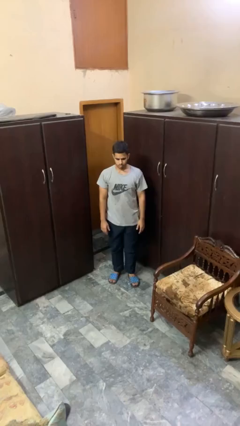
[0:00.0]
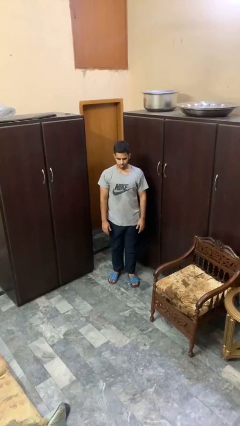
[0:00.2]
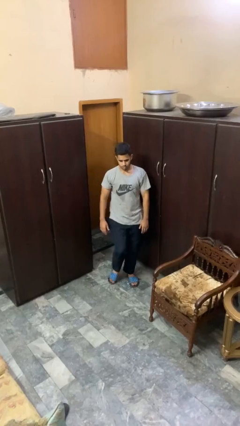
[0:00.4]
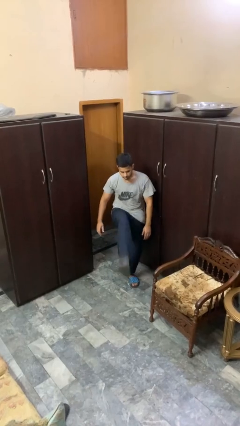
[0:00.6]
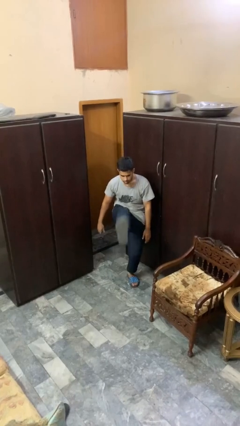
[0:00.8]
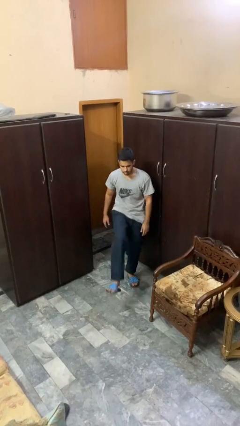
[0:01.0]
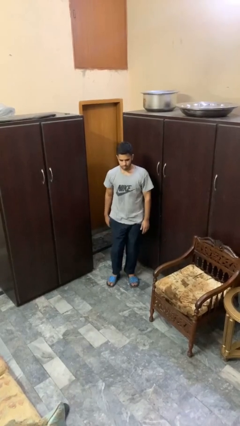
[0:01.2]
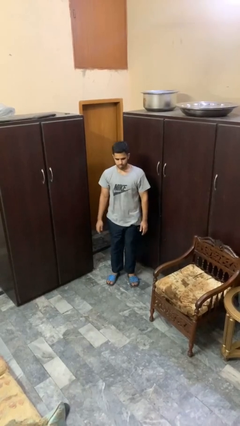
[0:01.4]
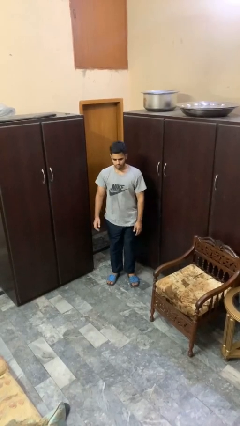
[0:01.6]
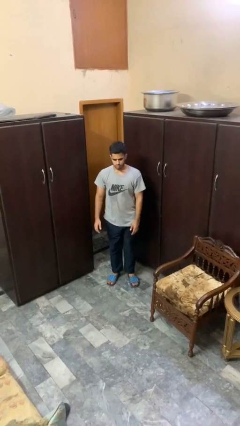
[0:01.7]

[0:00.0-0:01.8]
person karate kicks

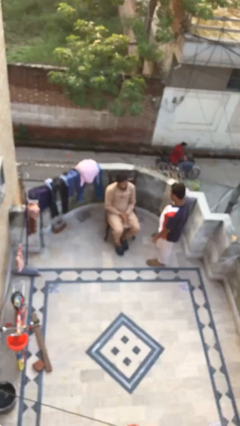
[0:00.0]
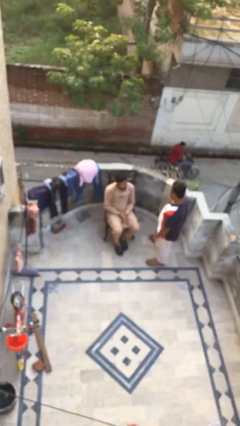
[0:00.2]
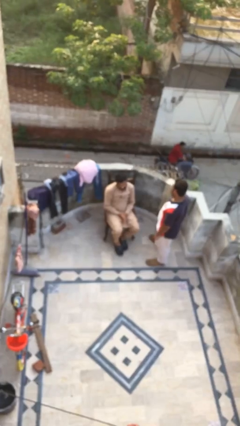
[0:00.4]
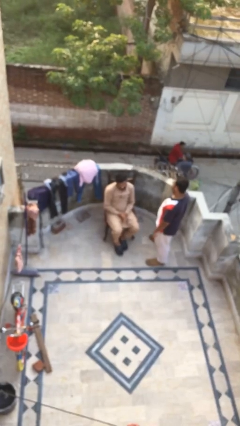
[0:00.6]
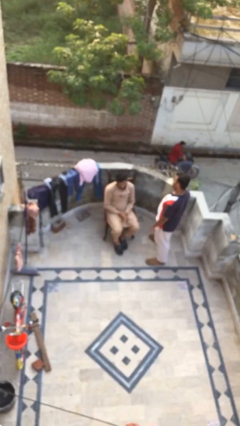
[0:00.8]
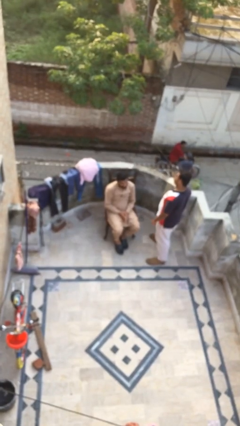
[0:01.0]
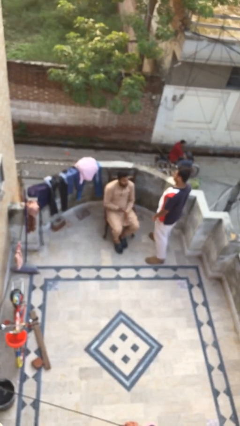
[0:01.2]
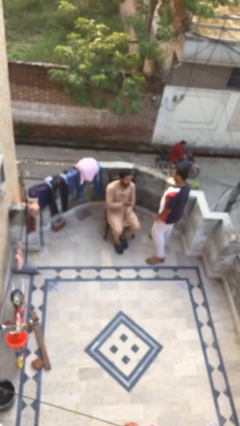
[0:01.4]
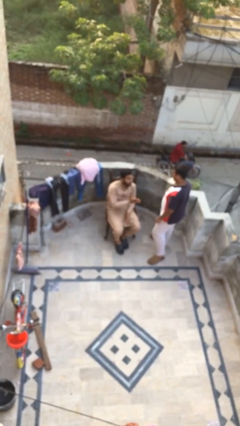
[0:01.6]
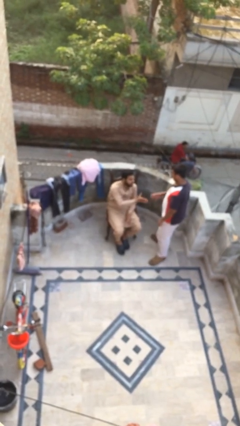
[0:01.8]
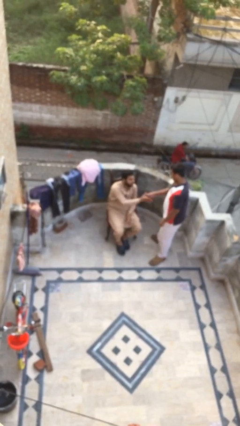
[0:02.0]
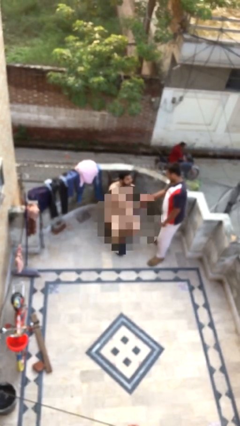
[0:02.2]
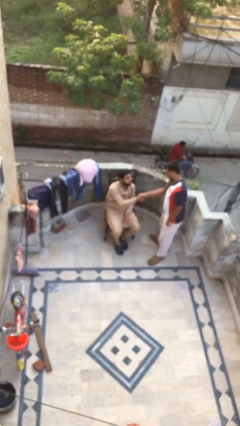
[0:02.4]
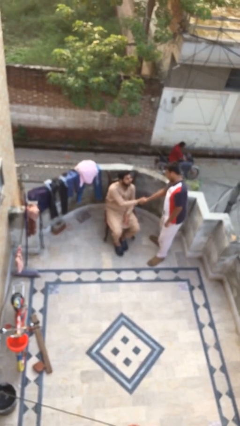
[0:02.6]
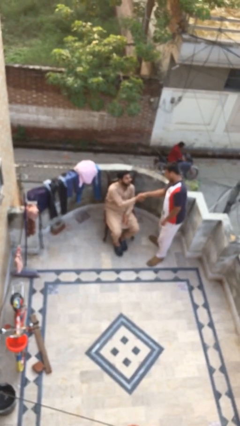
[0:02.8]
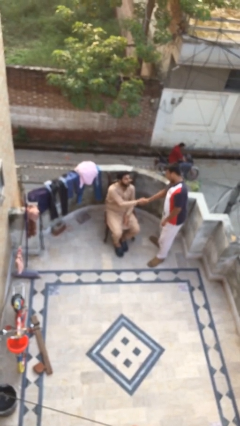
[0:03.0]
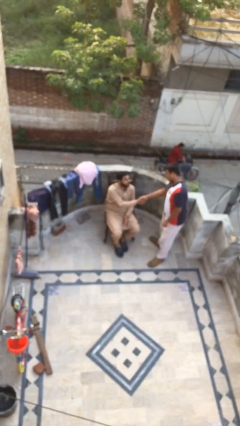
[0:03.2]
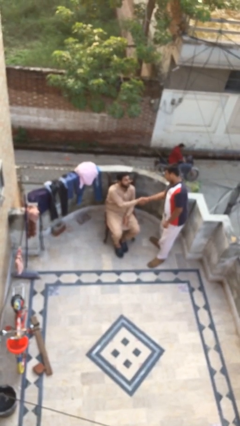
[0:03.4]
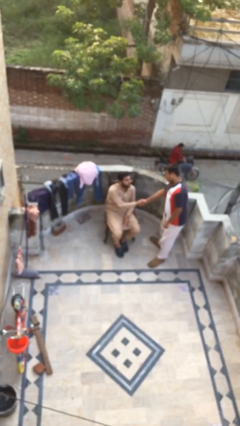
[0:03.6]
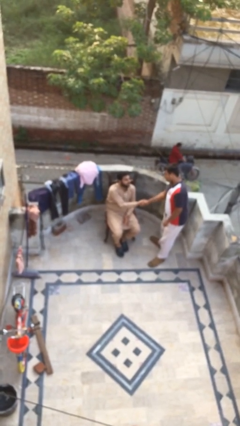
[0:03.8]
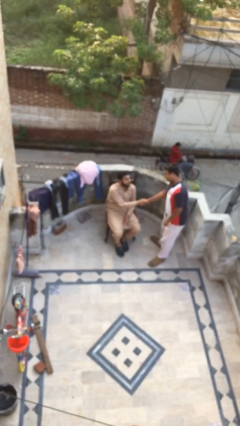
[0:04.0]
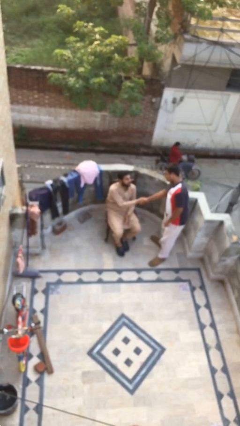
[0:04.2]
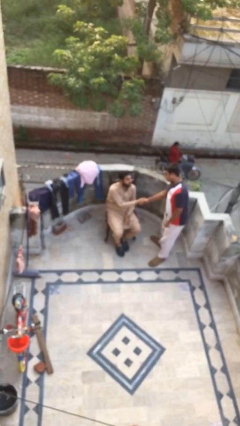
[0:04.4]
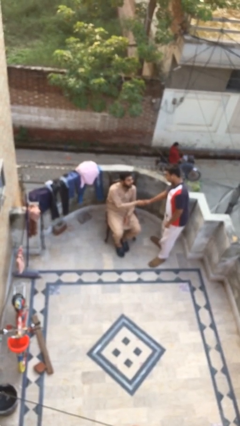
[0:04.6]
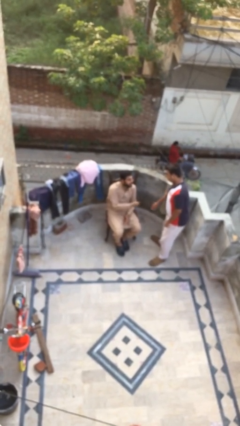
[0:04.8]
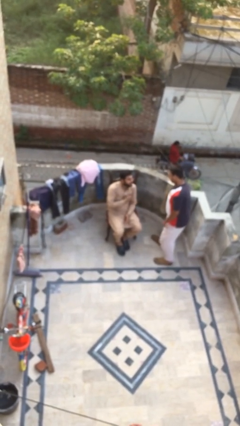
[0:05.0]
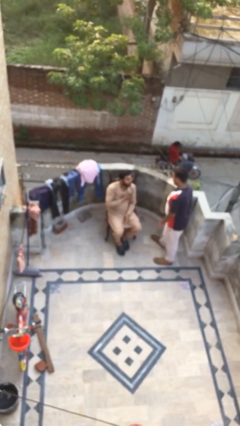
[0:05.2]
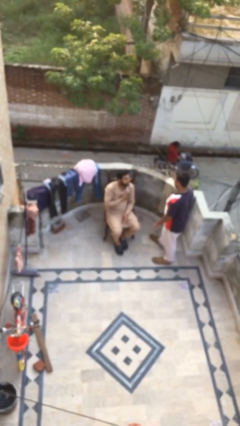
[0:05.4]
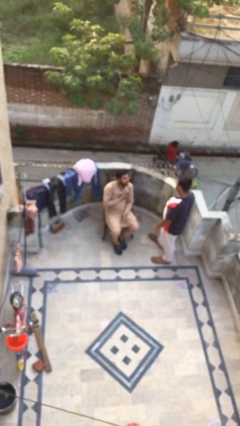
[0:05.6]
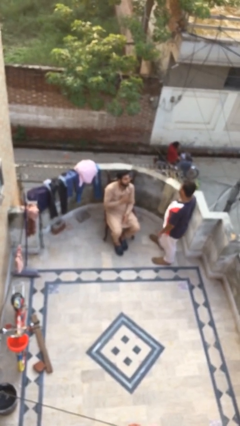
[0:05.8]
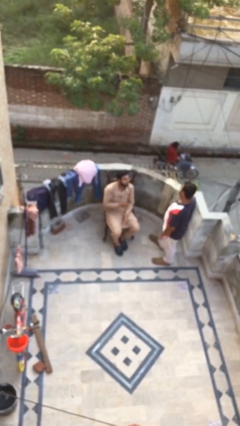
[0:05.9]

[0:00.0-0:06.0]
person shakes hand

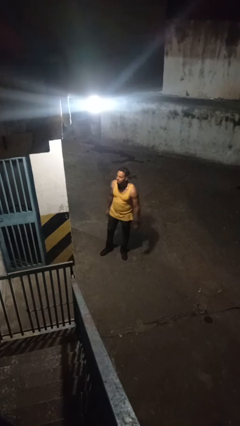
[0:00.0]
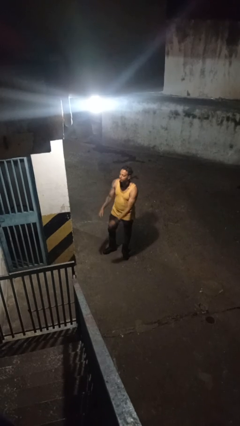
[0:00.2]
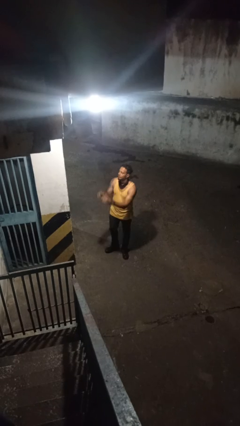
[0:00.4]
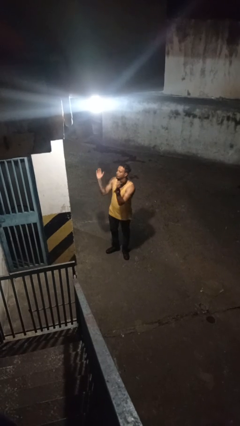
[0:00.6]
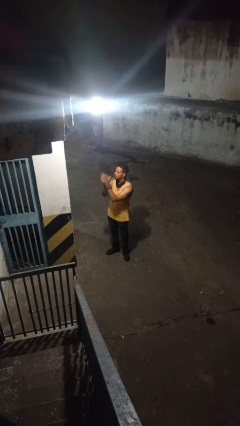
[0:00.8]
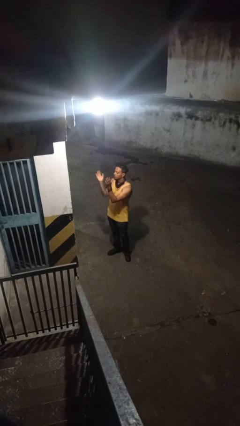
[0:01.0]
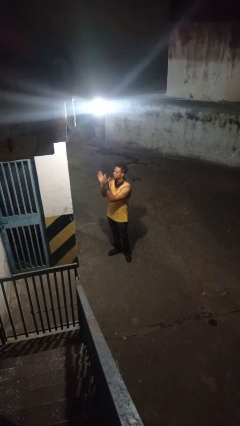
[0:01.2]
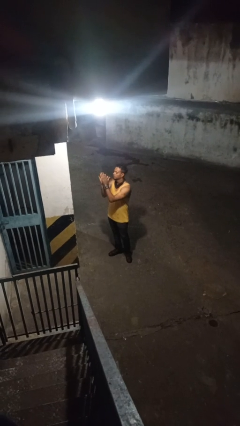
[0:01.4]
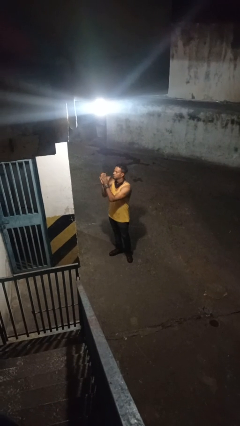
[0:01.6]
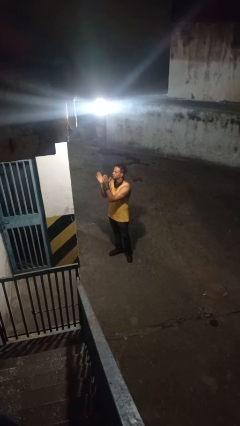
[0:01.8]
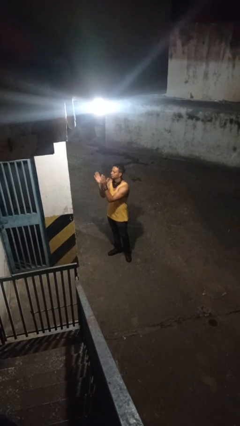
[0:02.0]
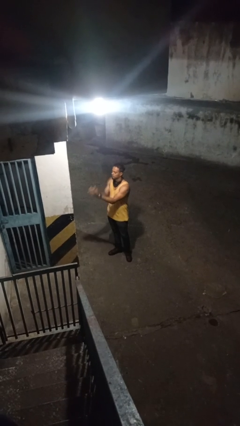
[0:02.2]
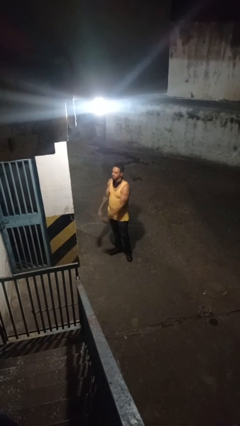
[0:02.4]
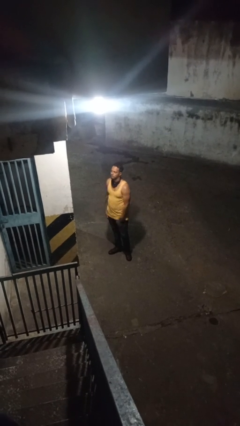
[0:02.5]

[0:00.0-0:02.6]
person claps hands

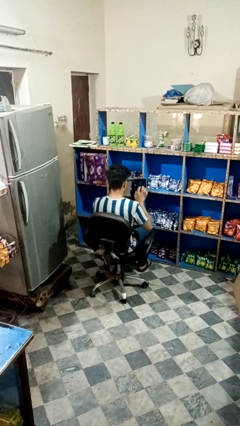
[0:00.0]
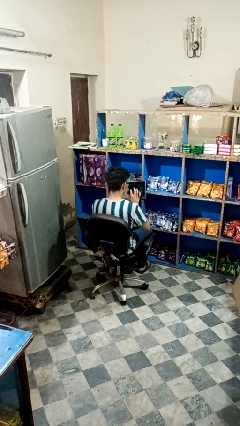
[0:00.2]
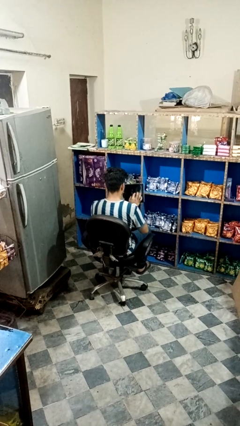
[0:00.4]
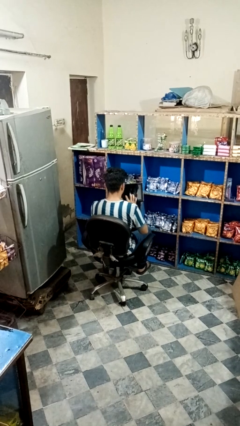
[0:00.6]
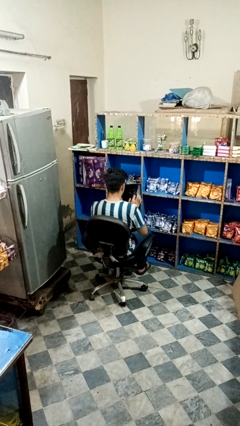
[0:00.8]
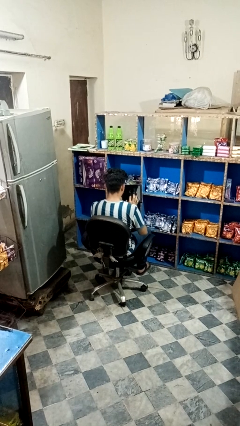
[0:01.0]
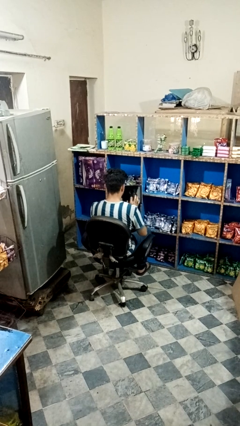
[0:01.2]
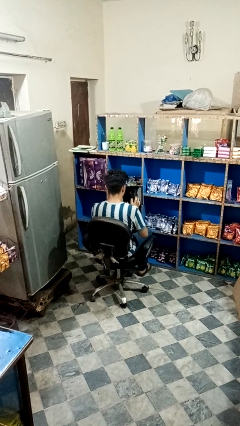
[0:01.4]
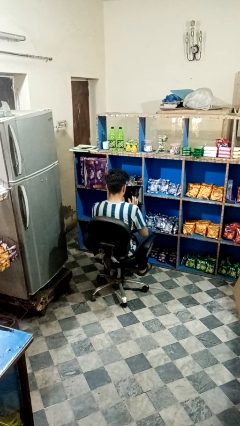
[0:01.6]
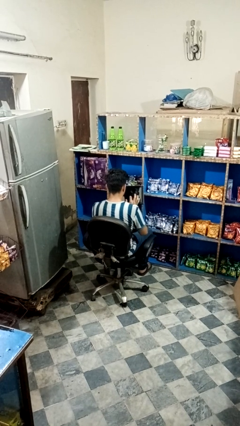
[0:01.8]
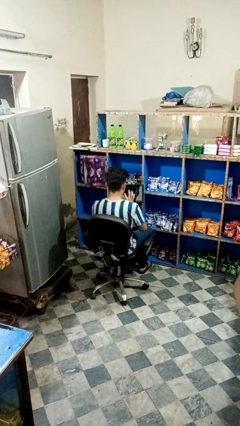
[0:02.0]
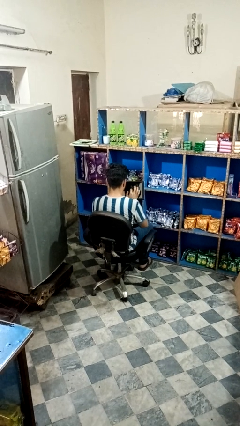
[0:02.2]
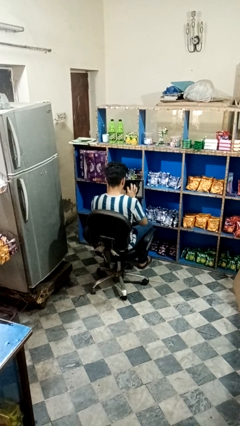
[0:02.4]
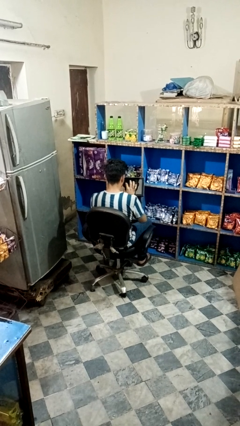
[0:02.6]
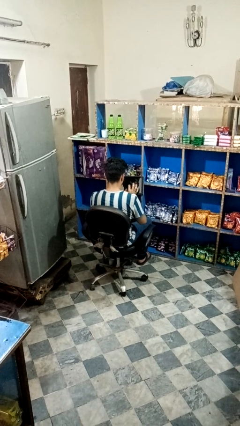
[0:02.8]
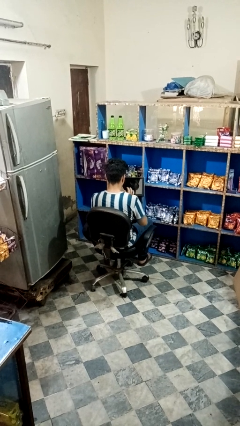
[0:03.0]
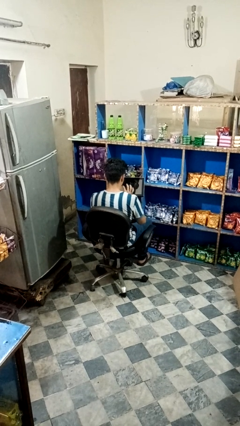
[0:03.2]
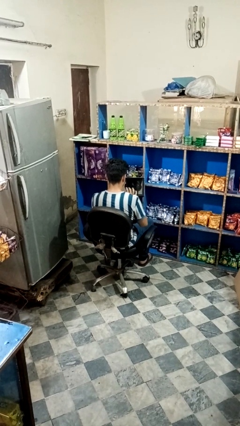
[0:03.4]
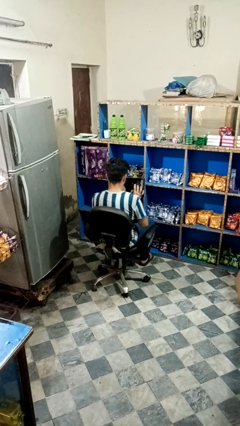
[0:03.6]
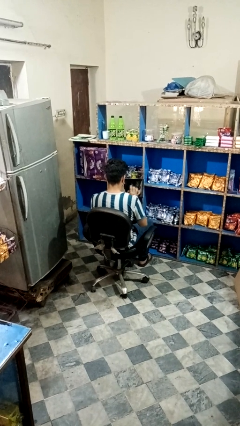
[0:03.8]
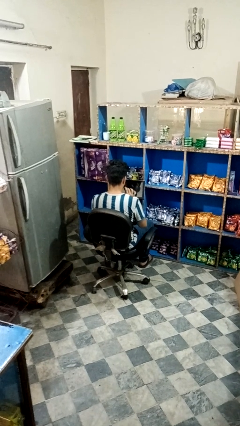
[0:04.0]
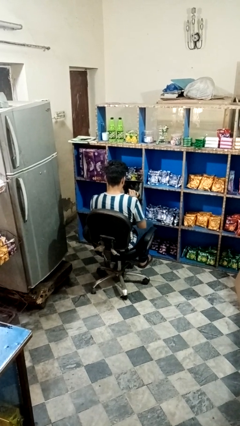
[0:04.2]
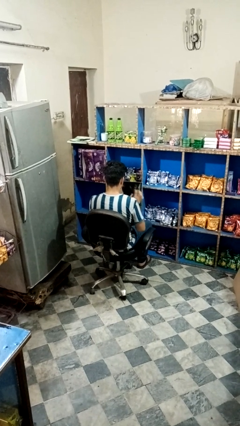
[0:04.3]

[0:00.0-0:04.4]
person interacts with tablet

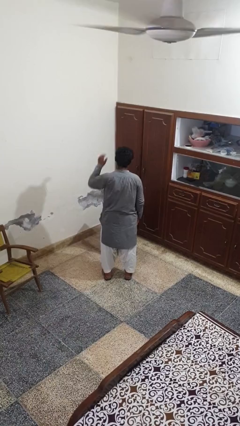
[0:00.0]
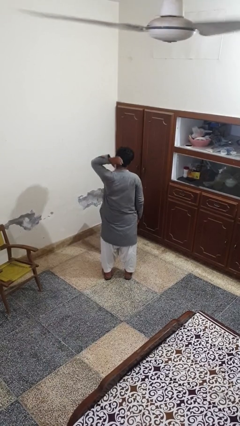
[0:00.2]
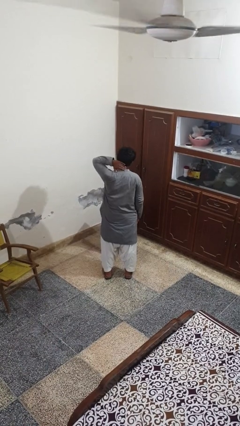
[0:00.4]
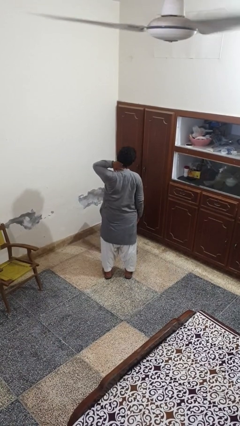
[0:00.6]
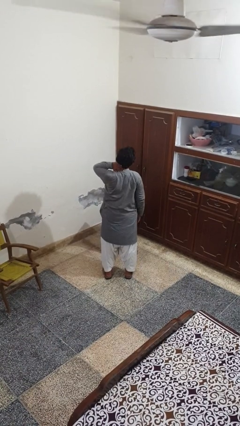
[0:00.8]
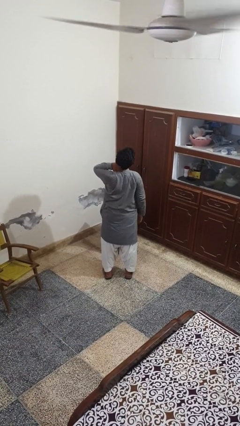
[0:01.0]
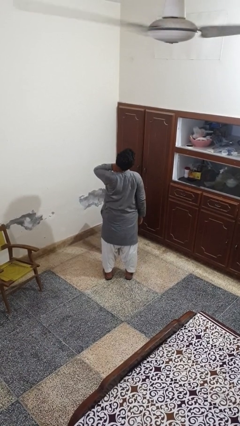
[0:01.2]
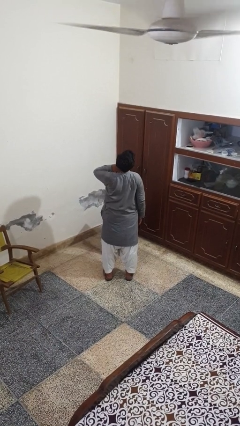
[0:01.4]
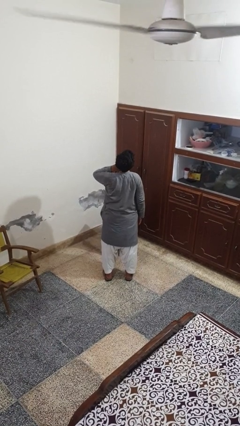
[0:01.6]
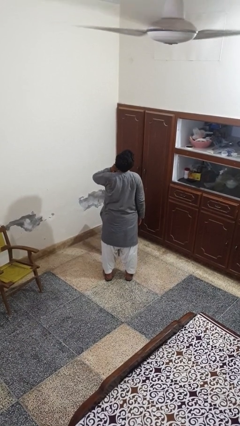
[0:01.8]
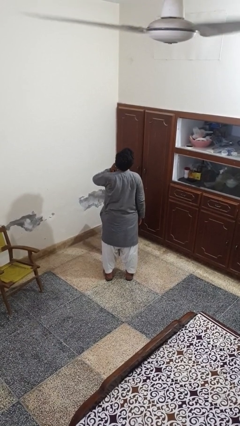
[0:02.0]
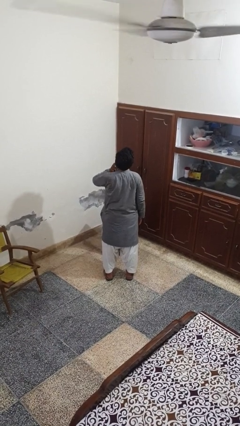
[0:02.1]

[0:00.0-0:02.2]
person rubs neck

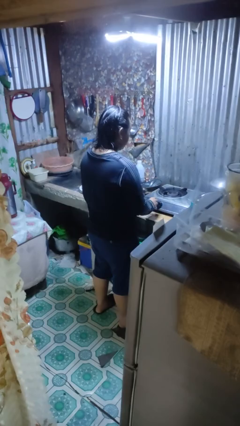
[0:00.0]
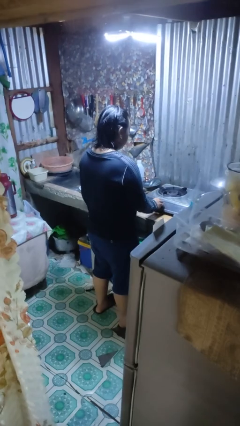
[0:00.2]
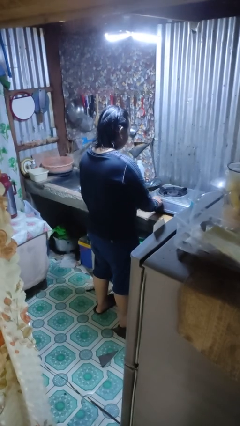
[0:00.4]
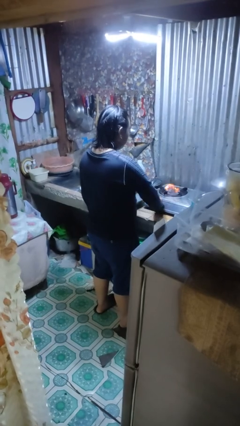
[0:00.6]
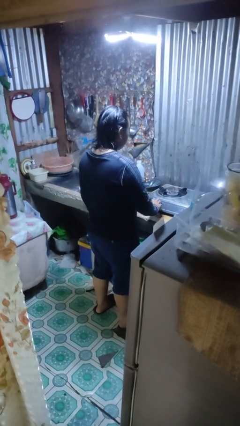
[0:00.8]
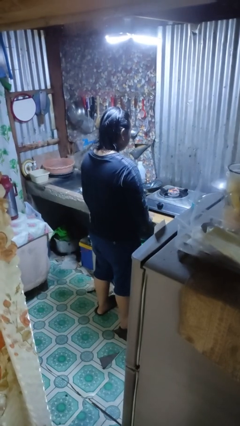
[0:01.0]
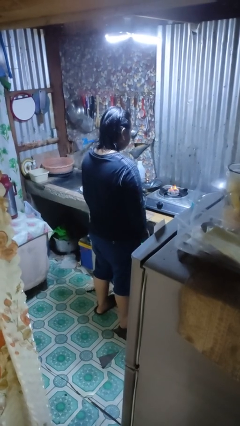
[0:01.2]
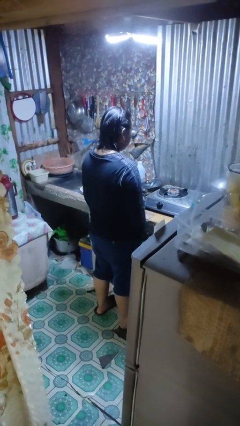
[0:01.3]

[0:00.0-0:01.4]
person turns on stovetop
